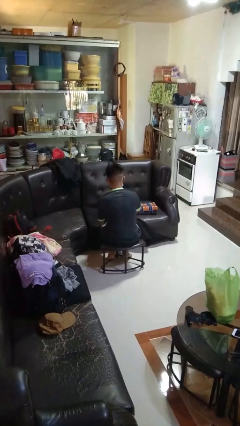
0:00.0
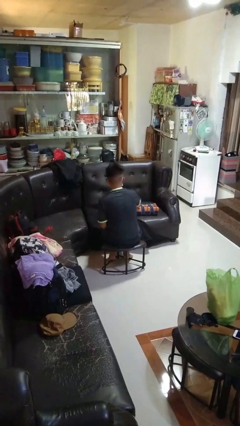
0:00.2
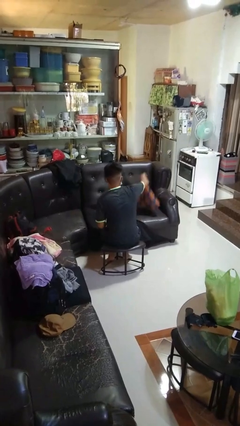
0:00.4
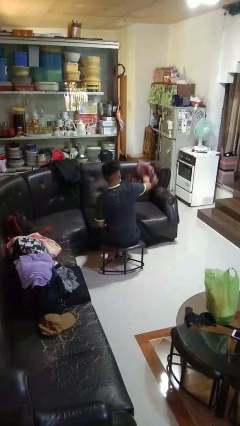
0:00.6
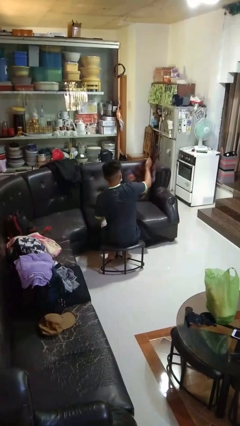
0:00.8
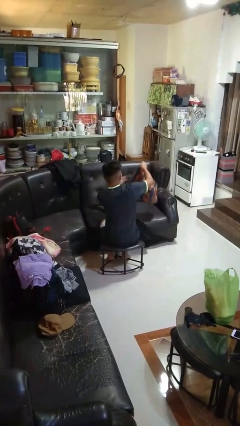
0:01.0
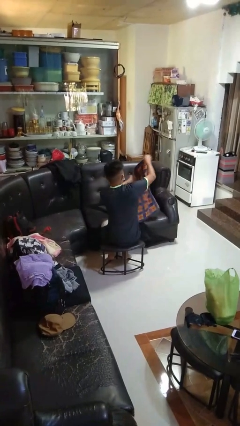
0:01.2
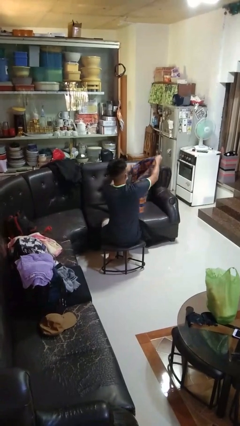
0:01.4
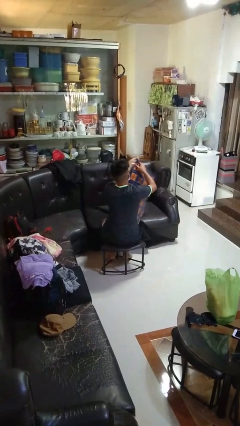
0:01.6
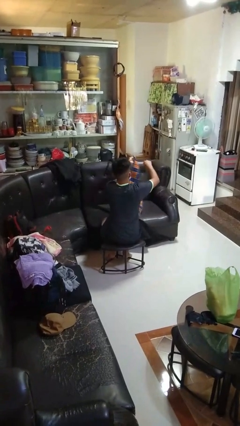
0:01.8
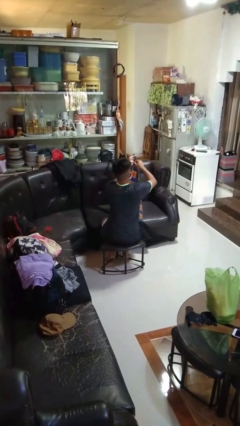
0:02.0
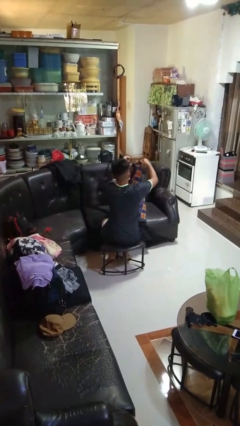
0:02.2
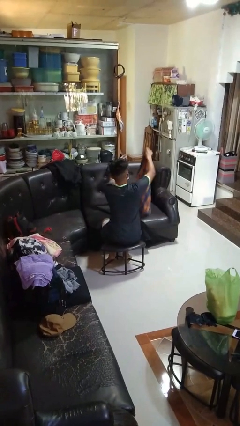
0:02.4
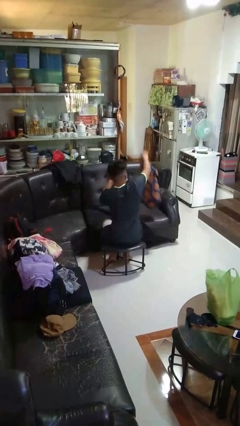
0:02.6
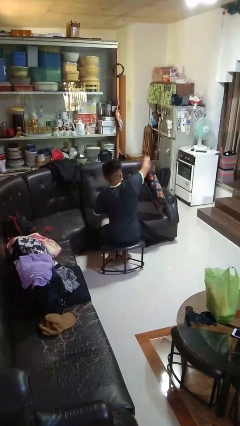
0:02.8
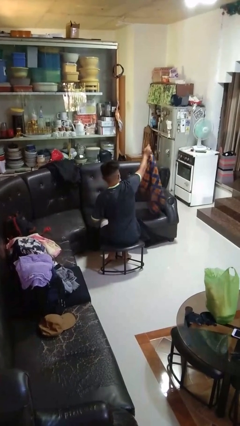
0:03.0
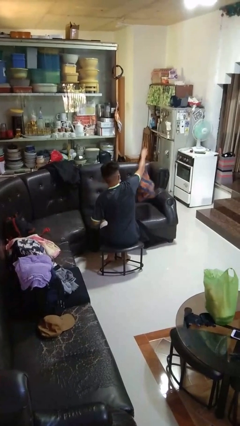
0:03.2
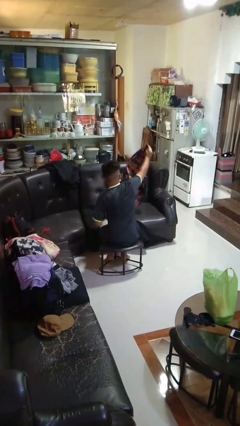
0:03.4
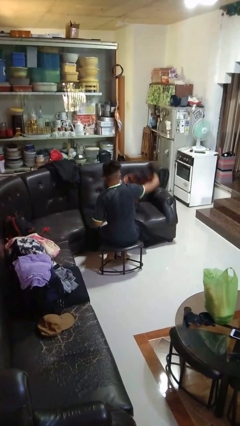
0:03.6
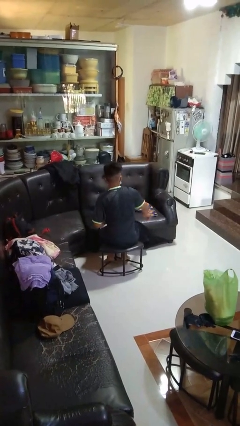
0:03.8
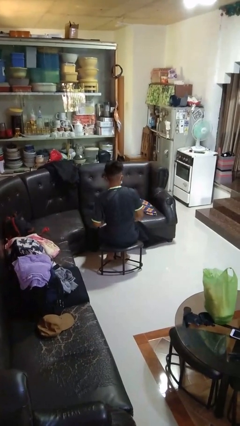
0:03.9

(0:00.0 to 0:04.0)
person unfolds blanket

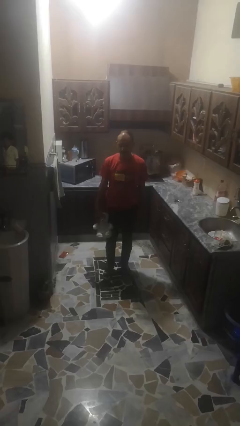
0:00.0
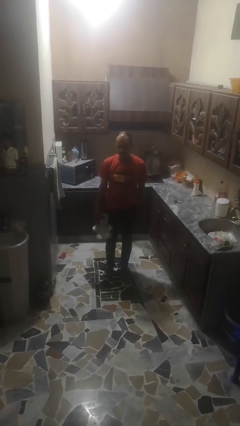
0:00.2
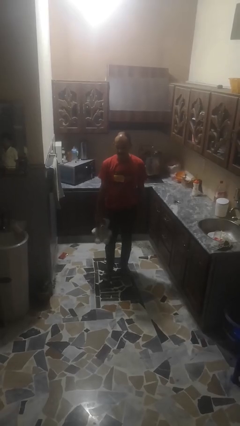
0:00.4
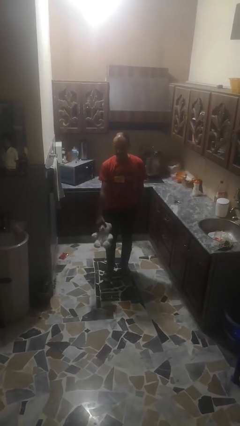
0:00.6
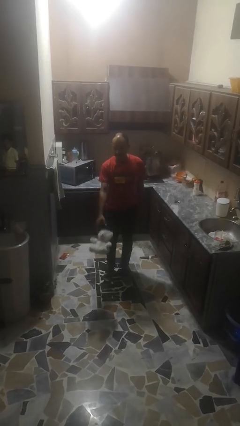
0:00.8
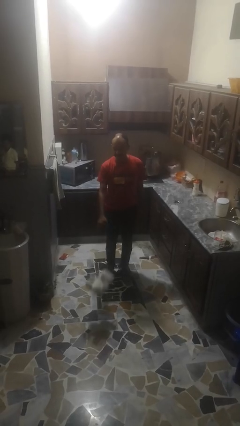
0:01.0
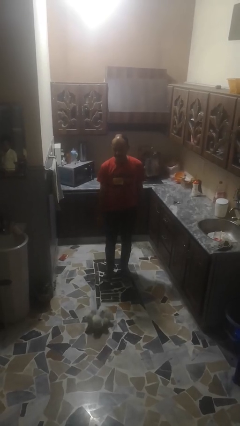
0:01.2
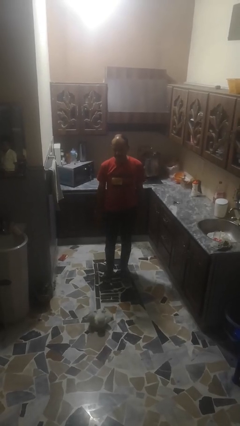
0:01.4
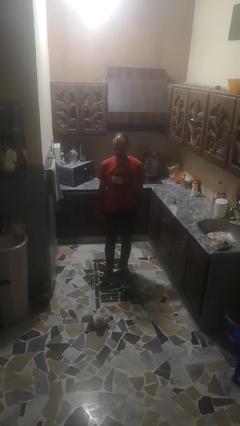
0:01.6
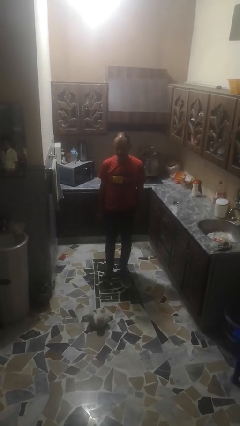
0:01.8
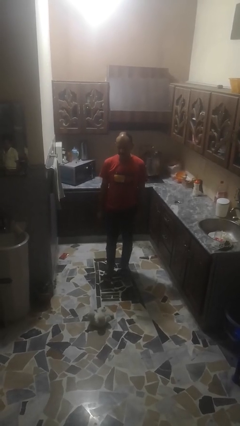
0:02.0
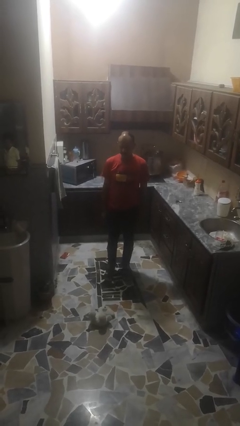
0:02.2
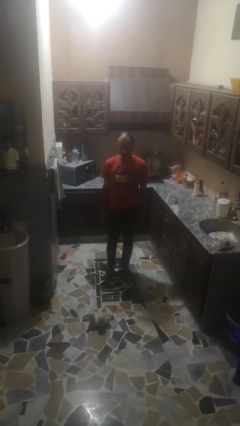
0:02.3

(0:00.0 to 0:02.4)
person throws object to ground

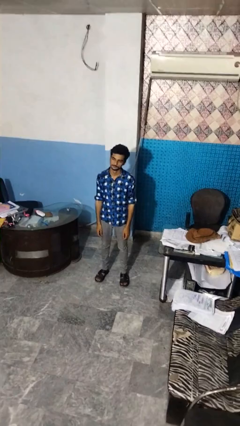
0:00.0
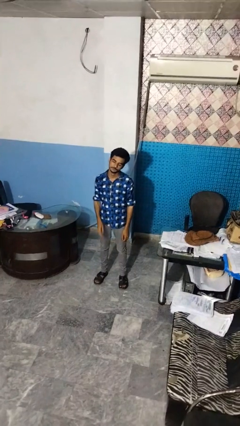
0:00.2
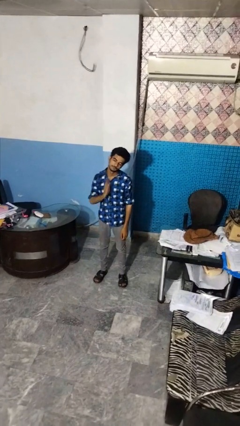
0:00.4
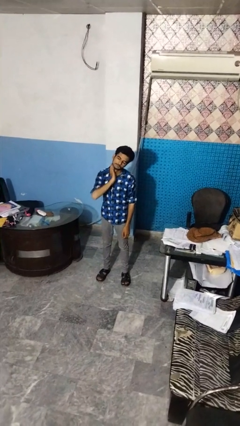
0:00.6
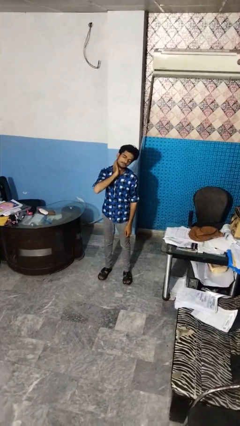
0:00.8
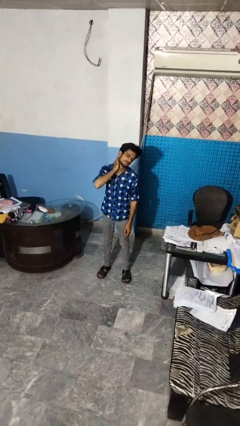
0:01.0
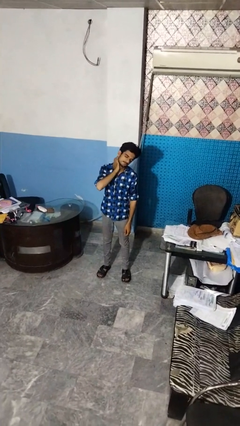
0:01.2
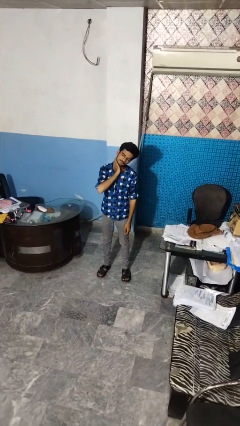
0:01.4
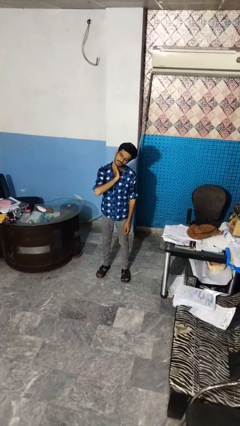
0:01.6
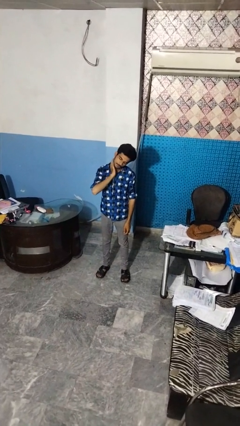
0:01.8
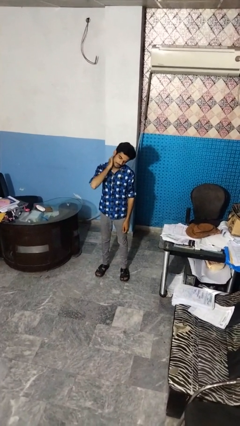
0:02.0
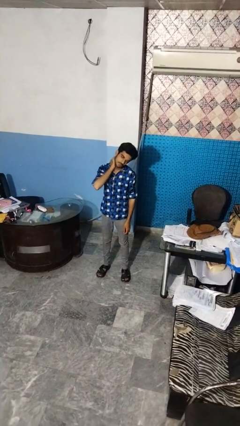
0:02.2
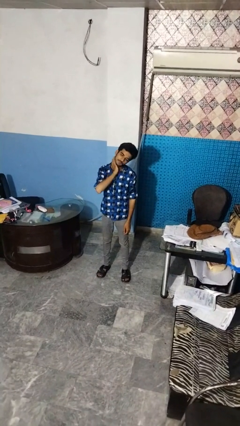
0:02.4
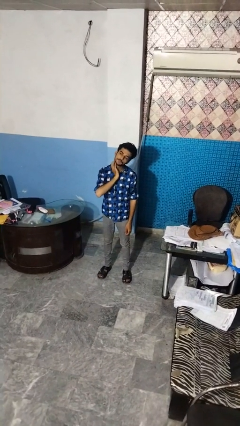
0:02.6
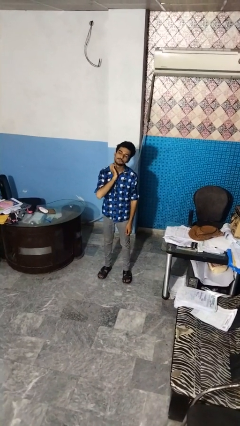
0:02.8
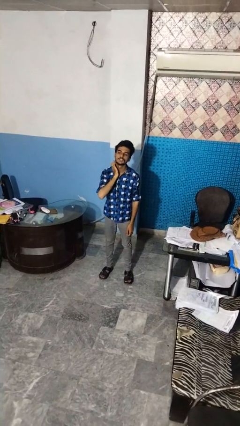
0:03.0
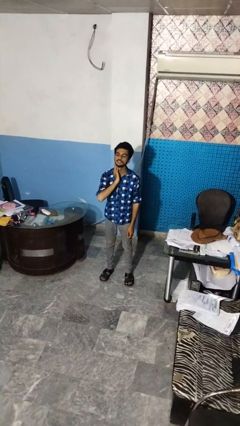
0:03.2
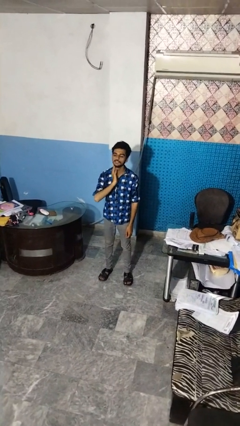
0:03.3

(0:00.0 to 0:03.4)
person rubs neck

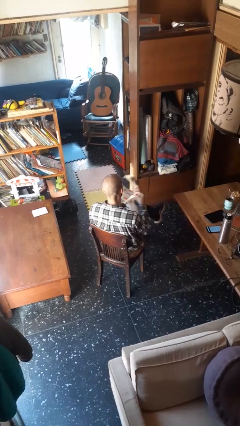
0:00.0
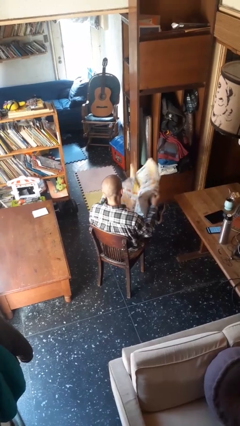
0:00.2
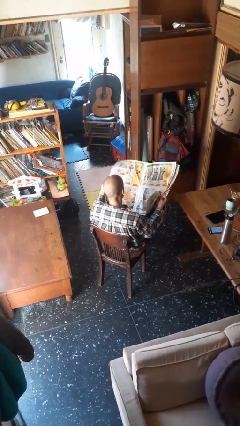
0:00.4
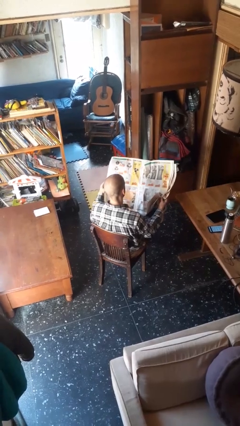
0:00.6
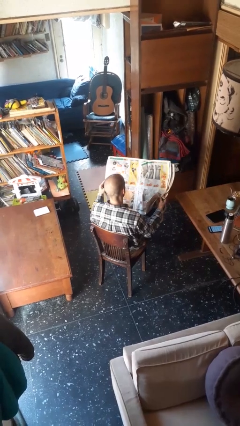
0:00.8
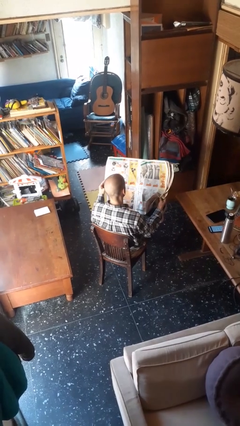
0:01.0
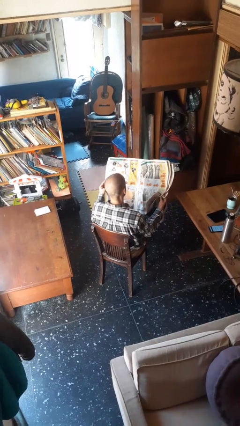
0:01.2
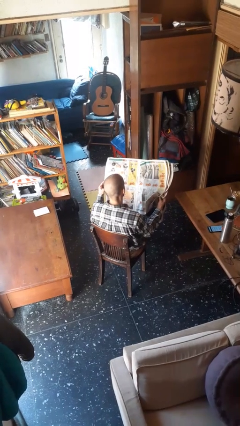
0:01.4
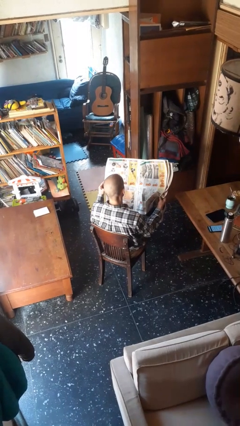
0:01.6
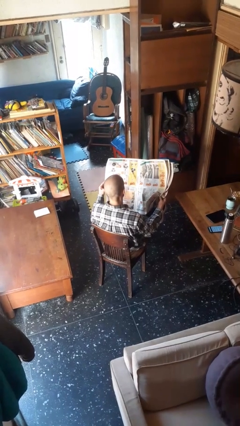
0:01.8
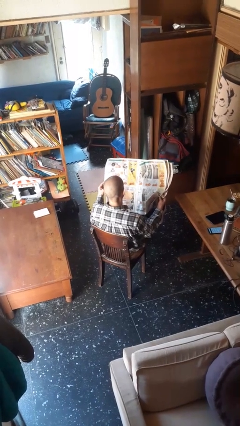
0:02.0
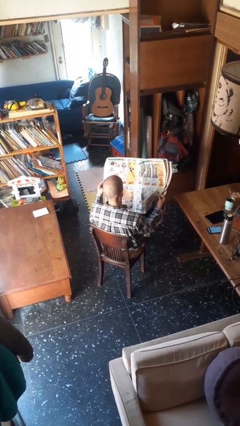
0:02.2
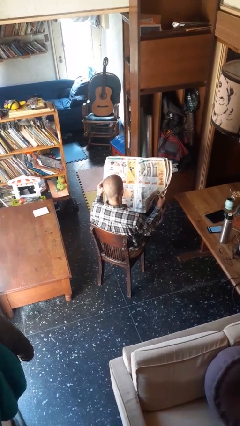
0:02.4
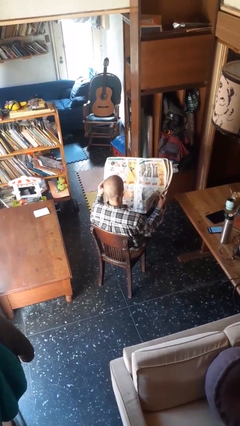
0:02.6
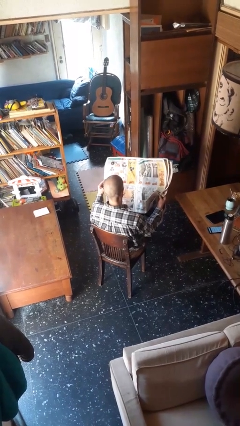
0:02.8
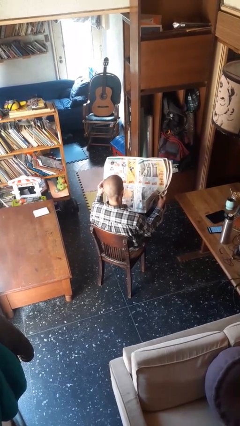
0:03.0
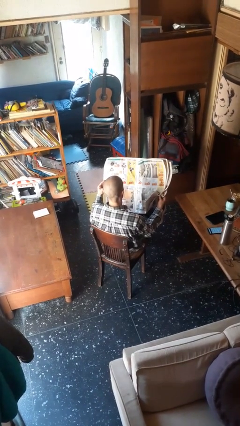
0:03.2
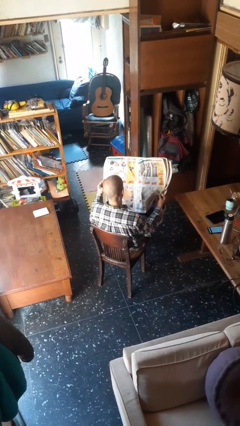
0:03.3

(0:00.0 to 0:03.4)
person reads newspaper

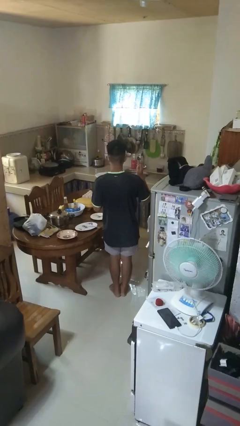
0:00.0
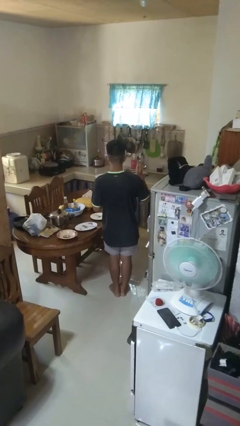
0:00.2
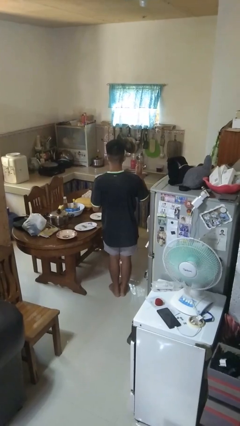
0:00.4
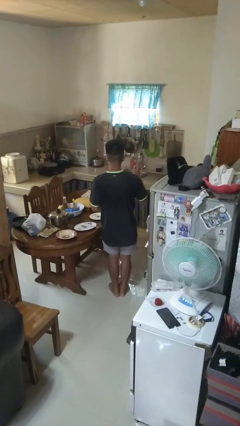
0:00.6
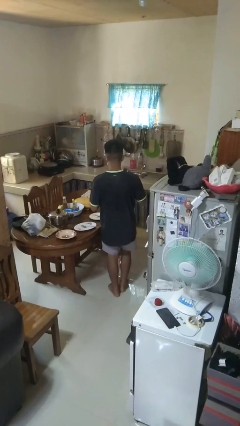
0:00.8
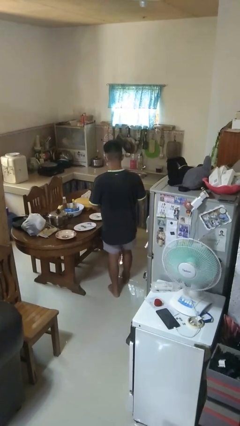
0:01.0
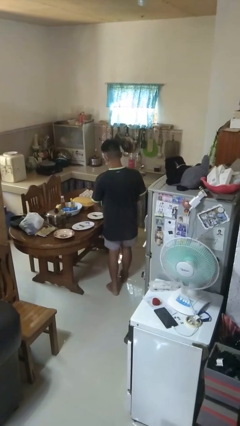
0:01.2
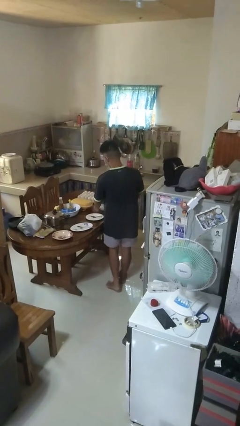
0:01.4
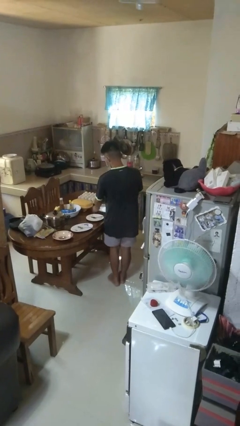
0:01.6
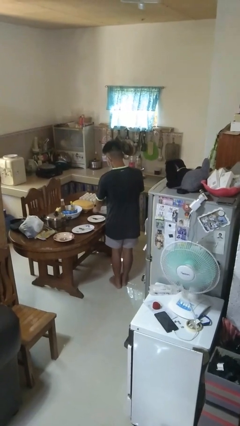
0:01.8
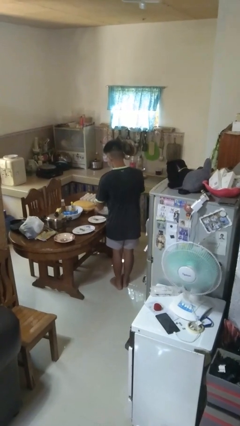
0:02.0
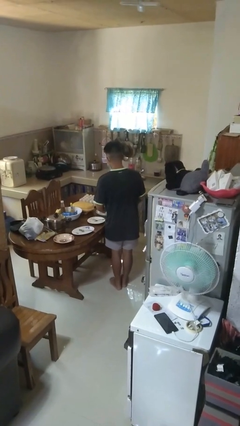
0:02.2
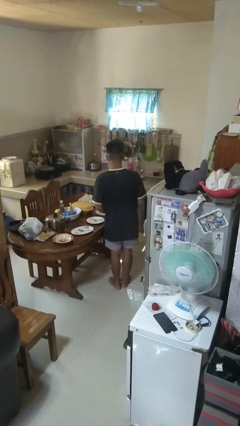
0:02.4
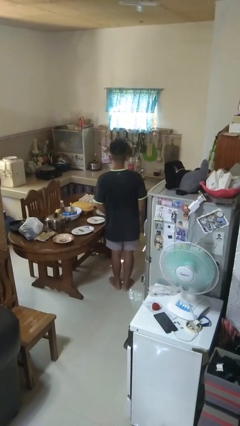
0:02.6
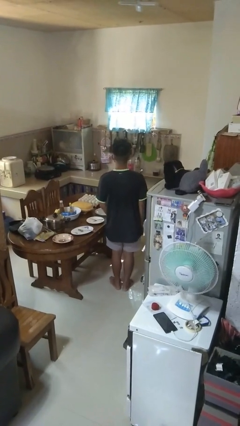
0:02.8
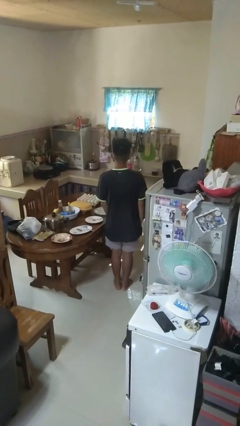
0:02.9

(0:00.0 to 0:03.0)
person sets table

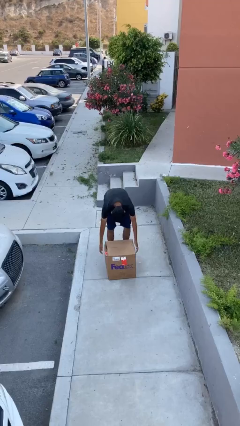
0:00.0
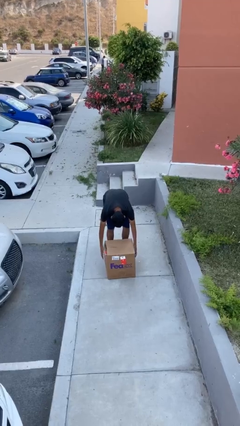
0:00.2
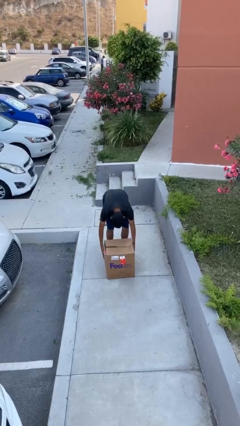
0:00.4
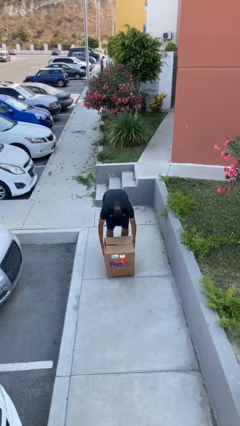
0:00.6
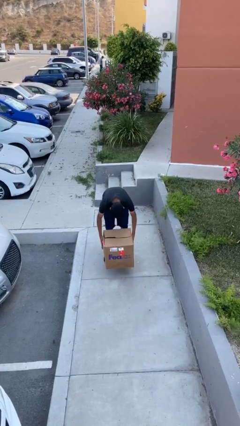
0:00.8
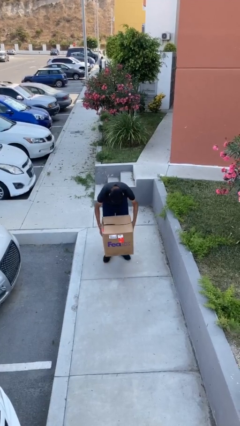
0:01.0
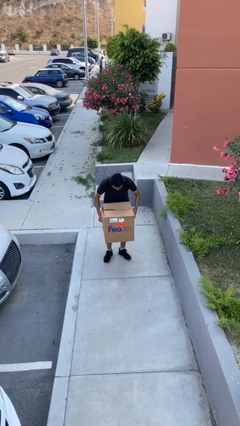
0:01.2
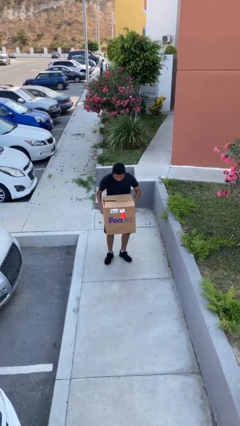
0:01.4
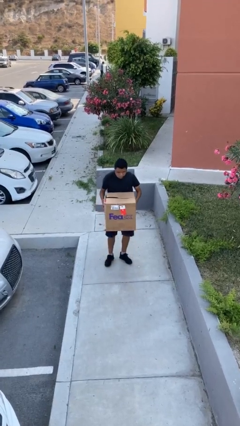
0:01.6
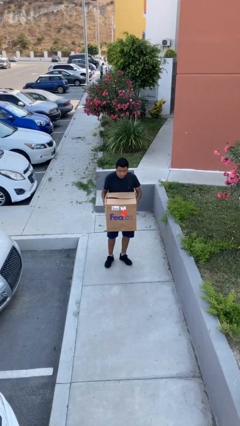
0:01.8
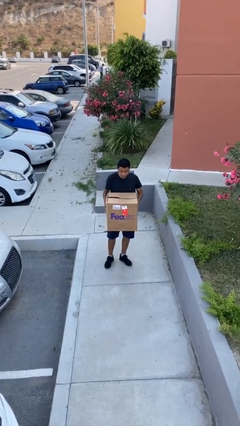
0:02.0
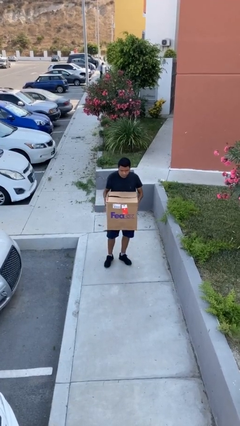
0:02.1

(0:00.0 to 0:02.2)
person picks up object from floor
